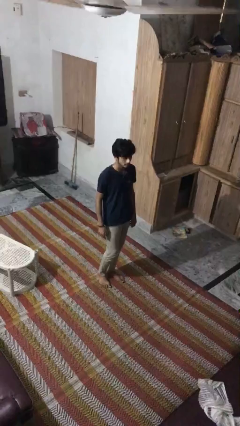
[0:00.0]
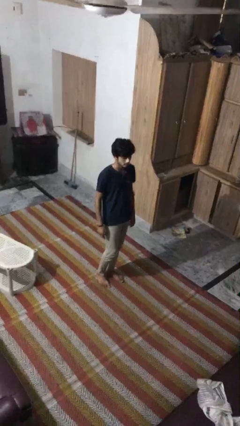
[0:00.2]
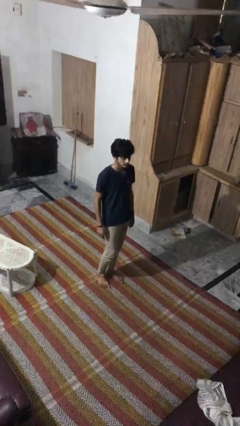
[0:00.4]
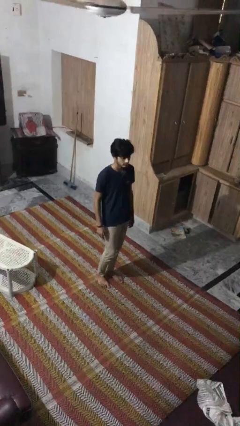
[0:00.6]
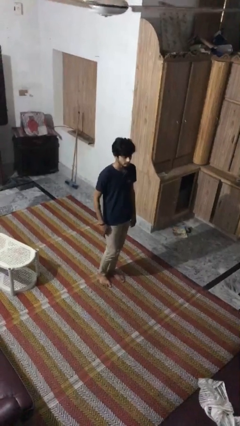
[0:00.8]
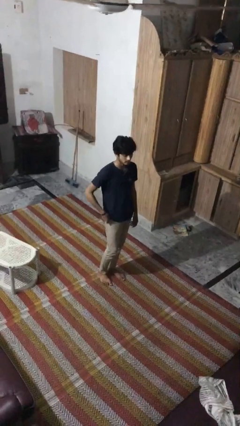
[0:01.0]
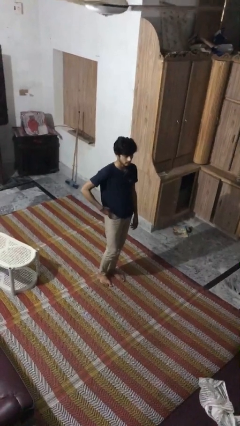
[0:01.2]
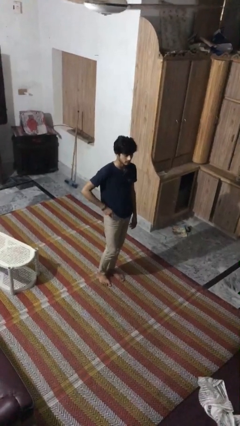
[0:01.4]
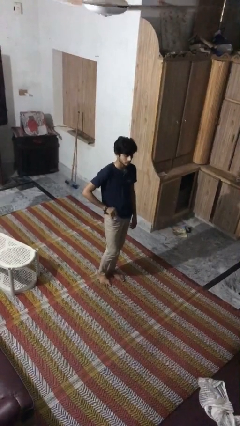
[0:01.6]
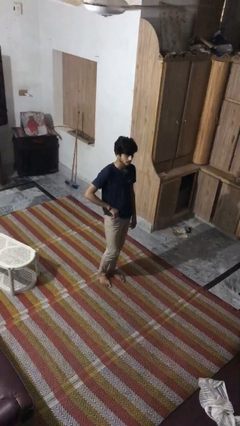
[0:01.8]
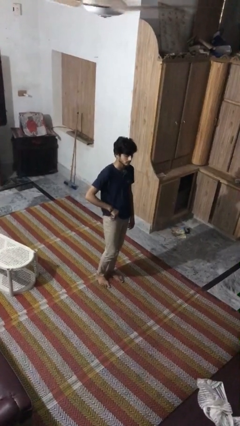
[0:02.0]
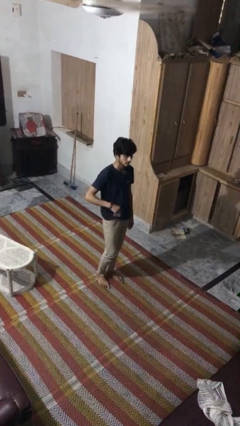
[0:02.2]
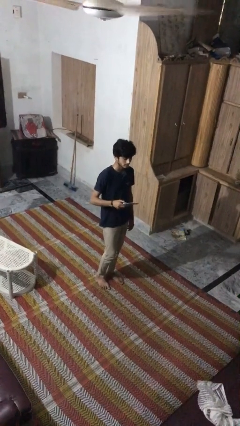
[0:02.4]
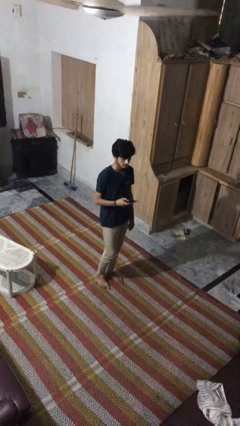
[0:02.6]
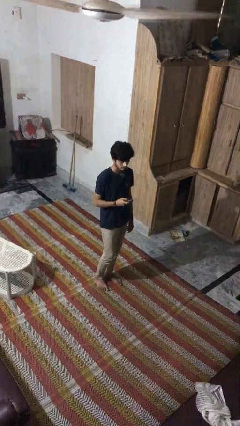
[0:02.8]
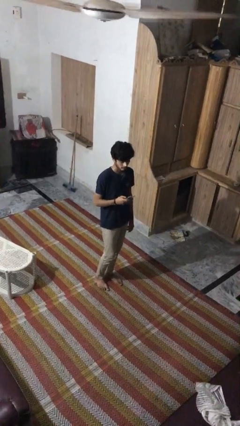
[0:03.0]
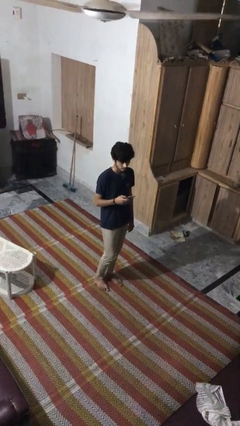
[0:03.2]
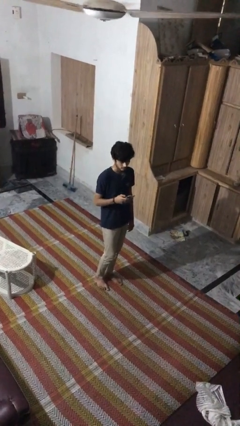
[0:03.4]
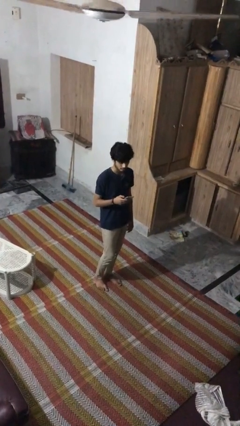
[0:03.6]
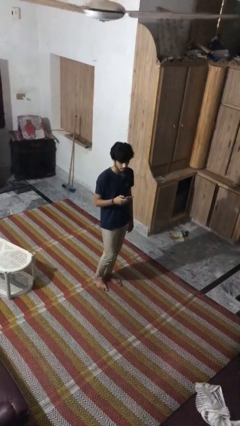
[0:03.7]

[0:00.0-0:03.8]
person takes phone from pocket

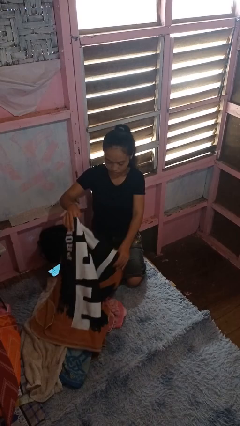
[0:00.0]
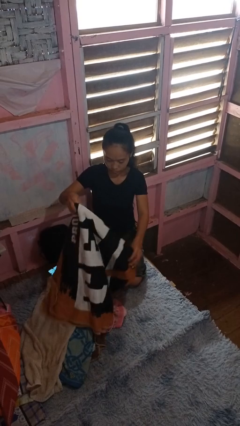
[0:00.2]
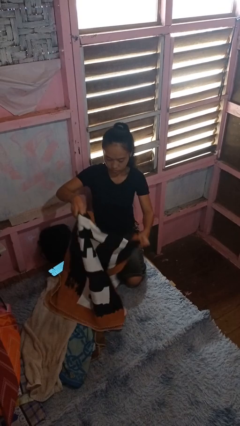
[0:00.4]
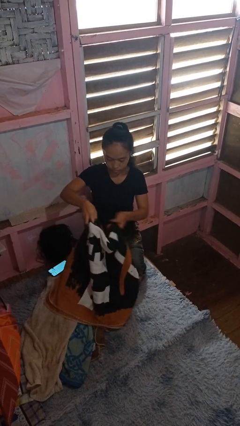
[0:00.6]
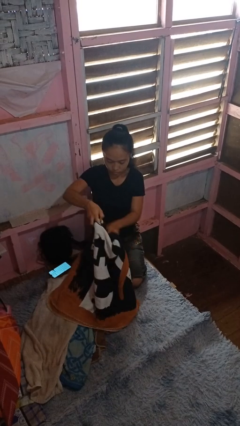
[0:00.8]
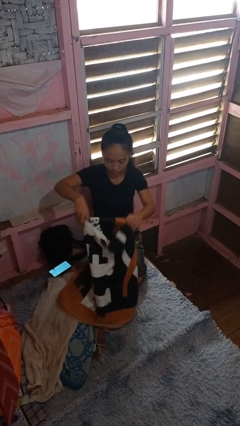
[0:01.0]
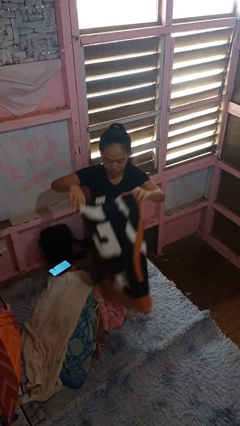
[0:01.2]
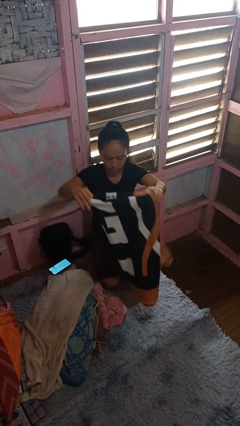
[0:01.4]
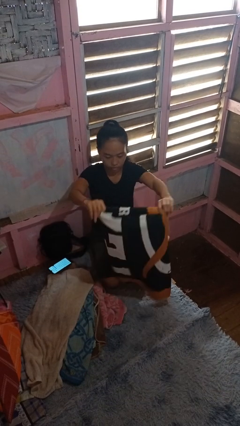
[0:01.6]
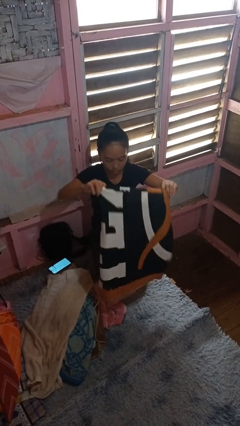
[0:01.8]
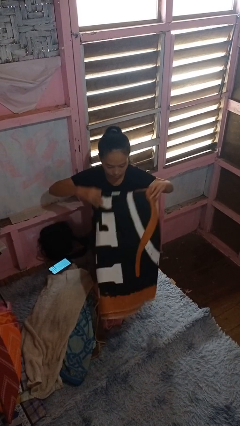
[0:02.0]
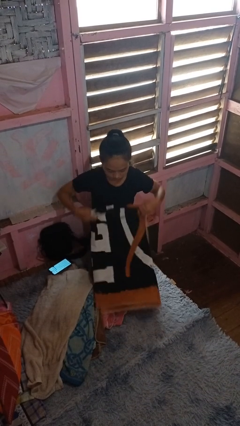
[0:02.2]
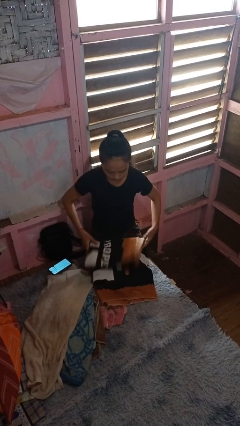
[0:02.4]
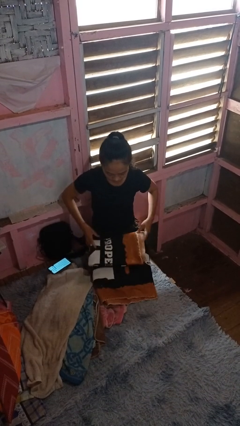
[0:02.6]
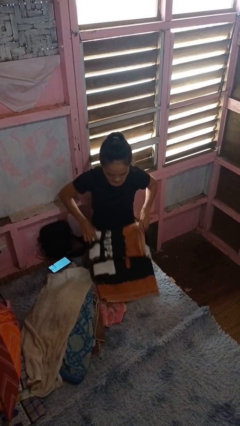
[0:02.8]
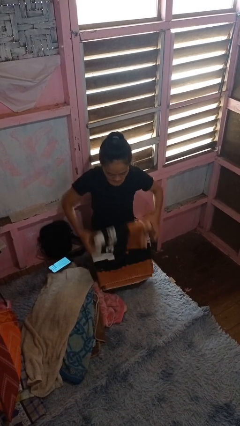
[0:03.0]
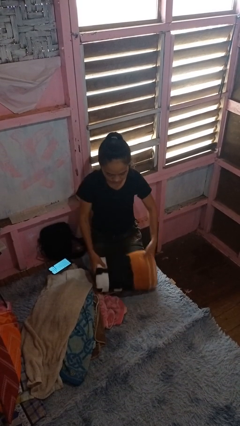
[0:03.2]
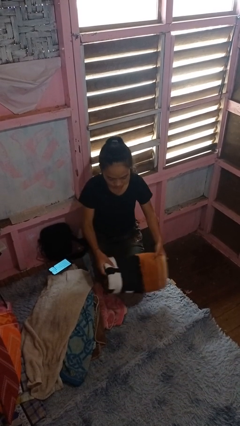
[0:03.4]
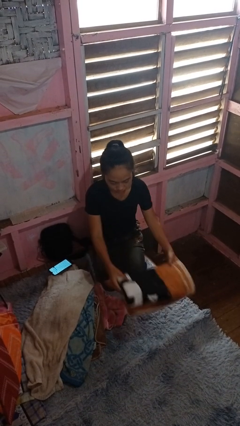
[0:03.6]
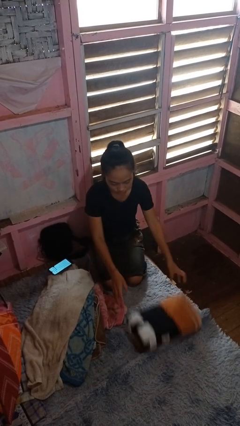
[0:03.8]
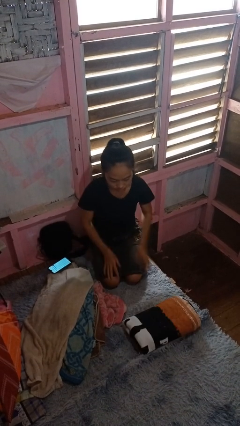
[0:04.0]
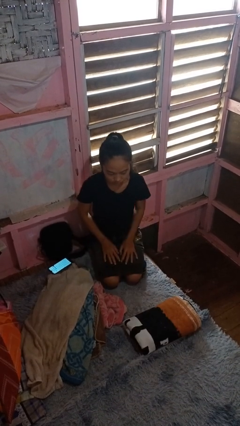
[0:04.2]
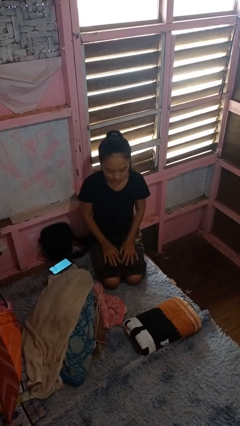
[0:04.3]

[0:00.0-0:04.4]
person folds towel

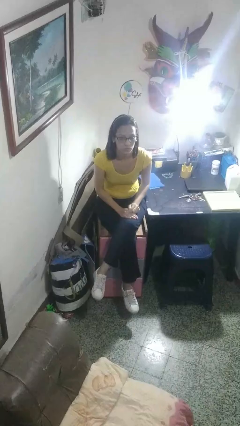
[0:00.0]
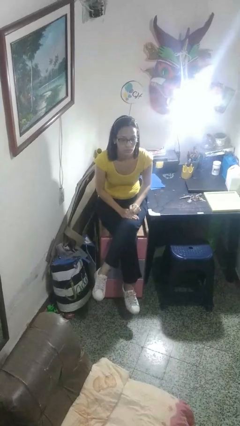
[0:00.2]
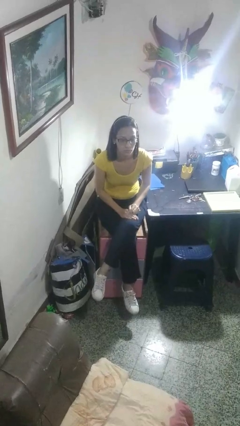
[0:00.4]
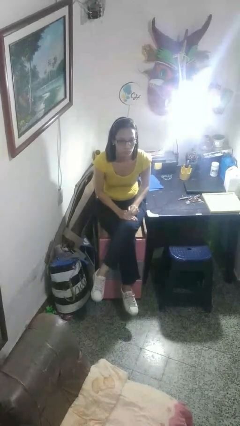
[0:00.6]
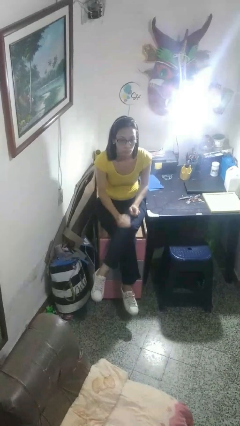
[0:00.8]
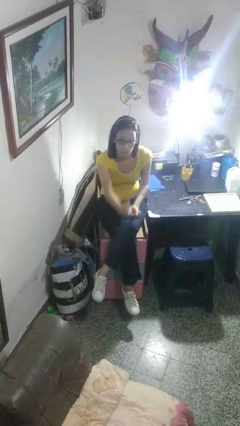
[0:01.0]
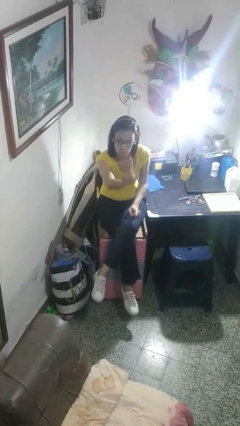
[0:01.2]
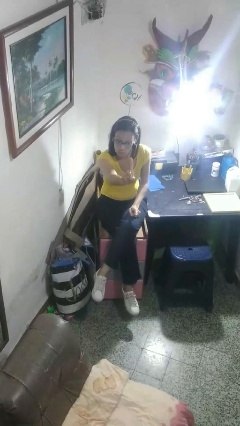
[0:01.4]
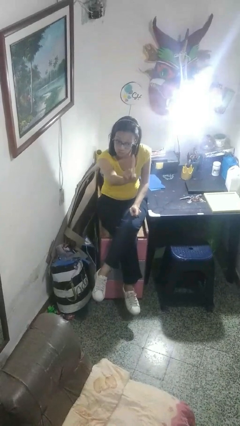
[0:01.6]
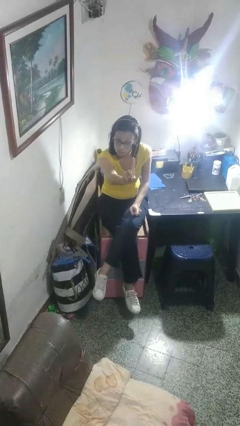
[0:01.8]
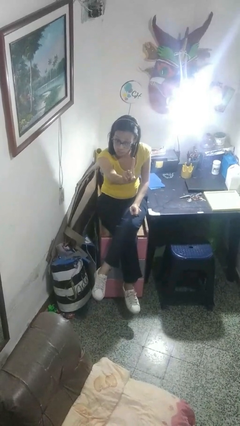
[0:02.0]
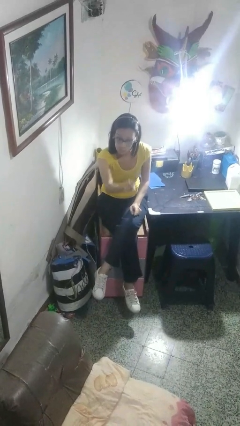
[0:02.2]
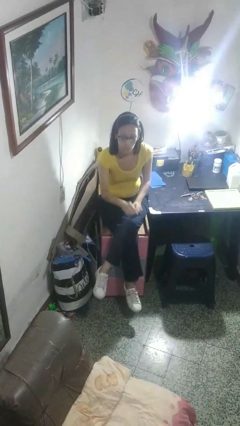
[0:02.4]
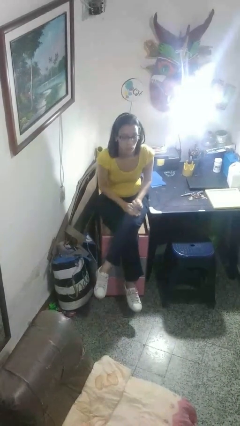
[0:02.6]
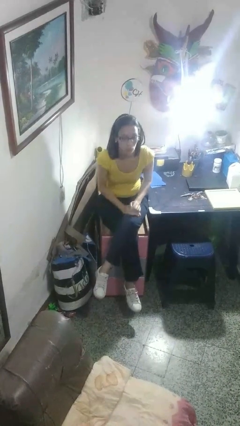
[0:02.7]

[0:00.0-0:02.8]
person gestures number one

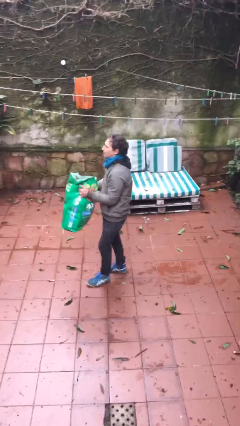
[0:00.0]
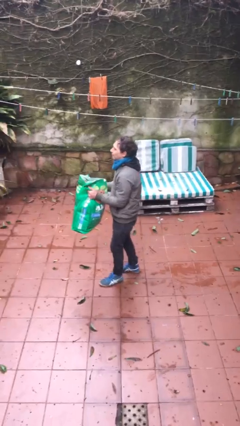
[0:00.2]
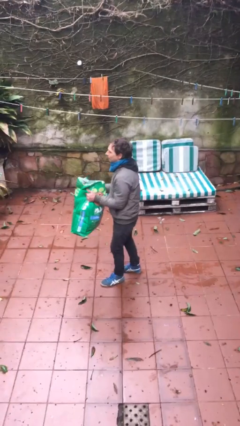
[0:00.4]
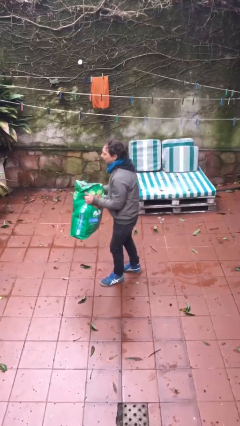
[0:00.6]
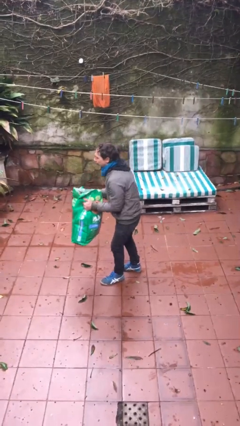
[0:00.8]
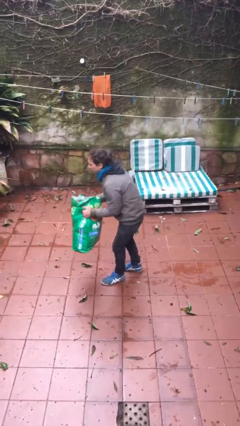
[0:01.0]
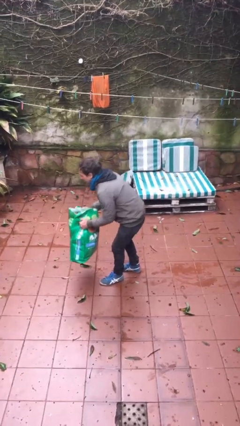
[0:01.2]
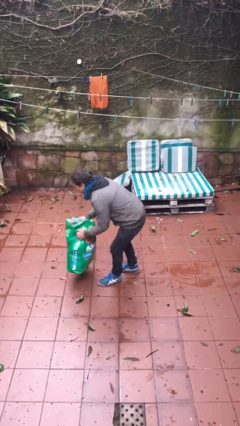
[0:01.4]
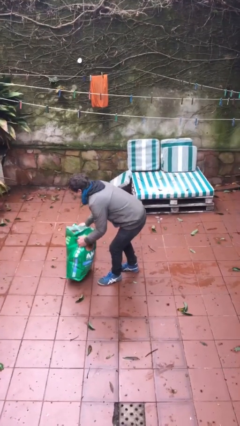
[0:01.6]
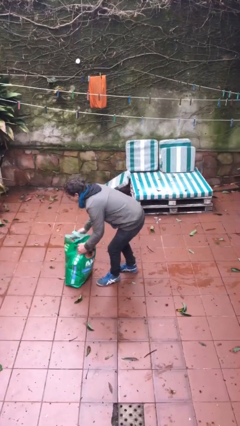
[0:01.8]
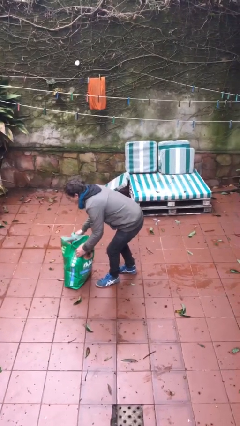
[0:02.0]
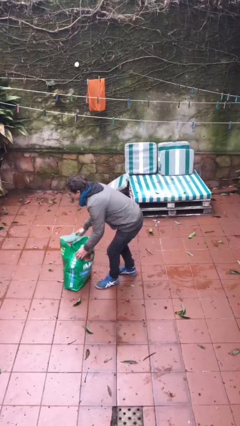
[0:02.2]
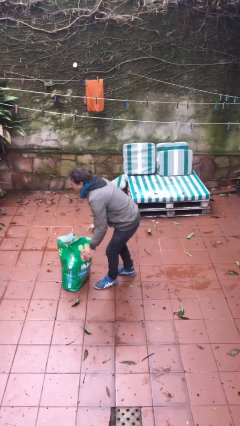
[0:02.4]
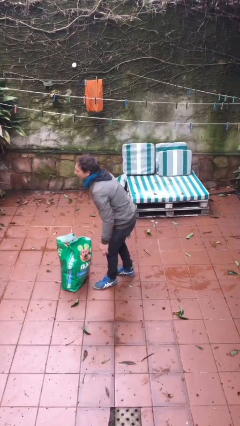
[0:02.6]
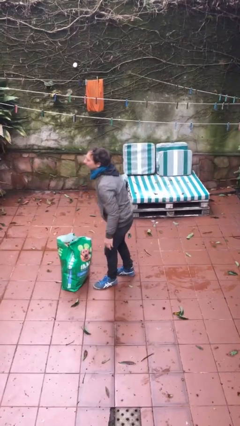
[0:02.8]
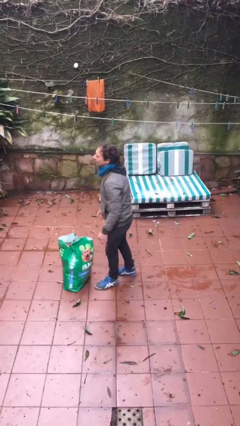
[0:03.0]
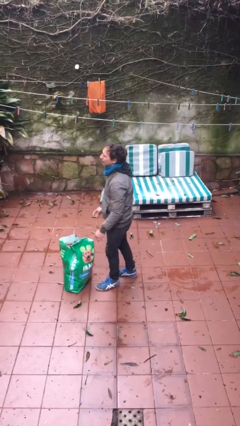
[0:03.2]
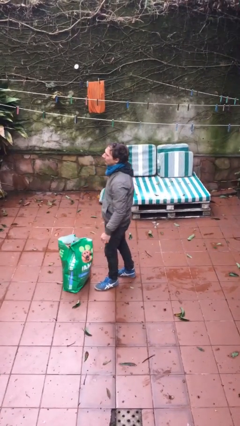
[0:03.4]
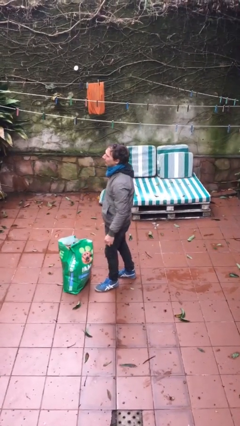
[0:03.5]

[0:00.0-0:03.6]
person puts down object on floor

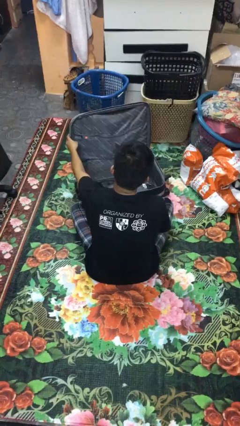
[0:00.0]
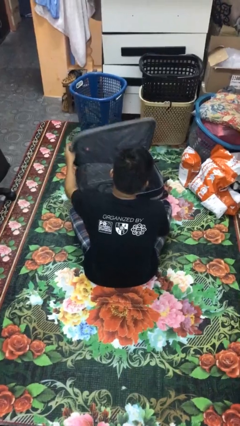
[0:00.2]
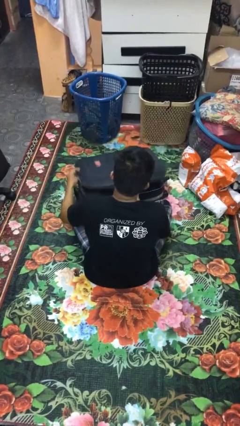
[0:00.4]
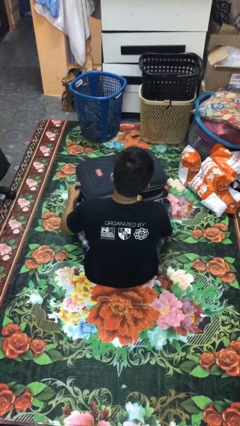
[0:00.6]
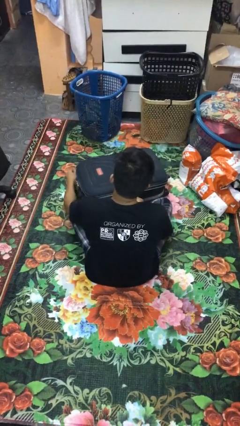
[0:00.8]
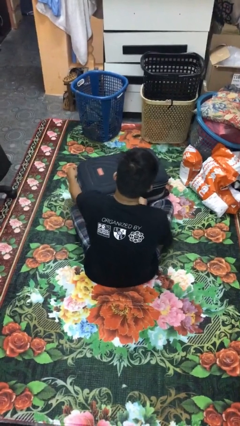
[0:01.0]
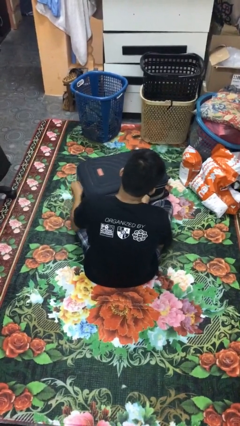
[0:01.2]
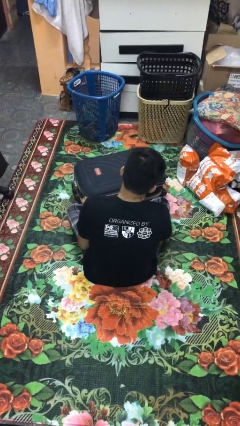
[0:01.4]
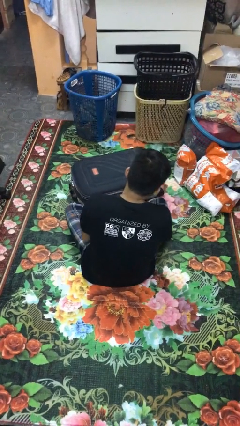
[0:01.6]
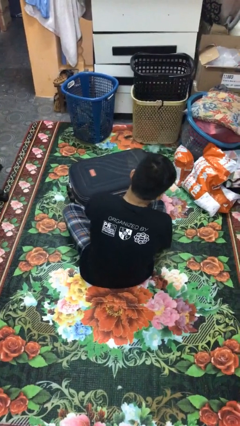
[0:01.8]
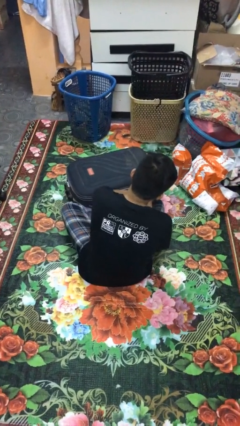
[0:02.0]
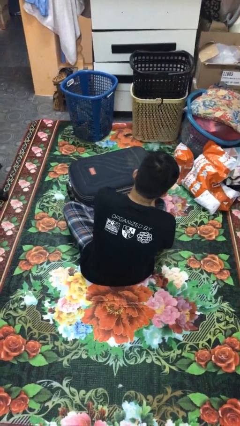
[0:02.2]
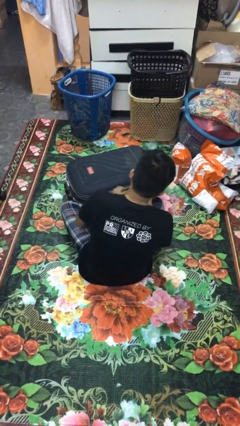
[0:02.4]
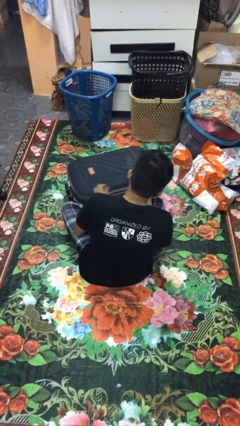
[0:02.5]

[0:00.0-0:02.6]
person closes suitcase

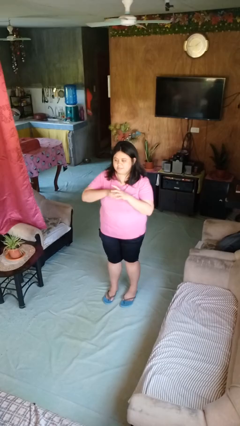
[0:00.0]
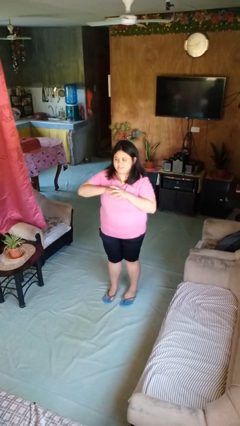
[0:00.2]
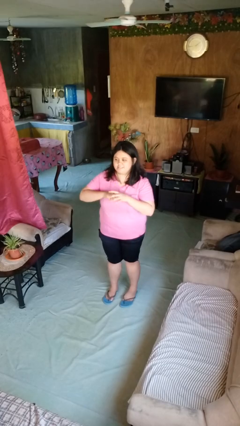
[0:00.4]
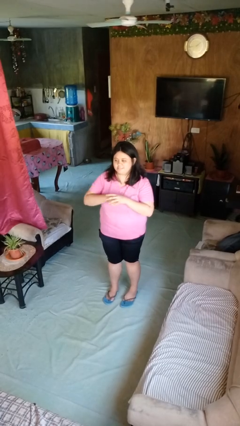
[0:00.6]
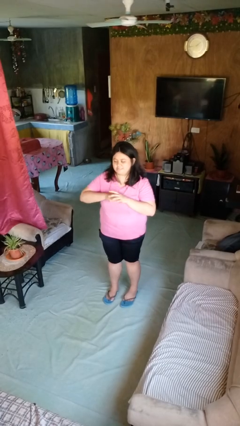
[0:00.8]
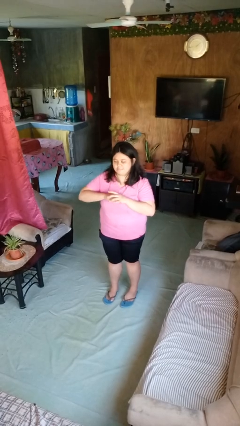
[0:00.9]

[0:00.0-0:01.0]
person cracks knuckles
